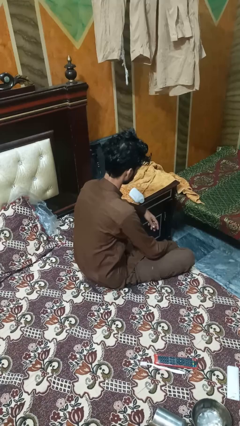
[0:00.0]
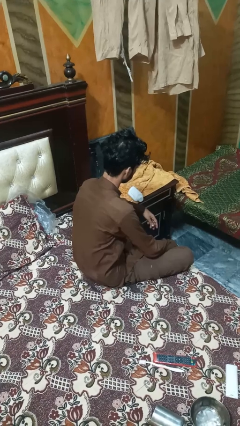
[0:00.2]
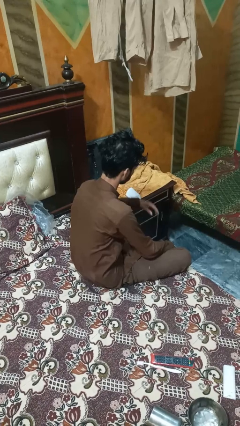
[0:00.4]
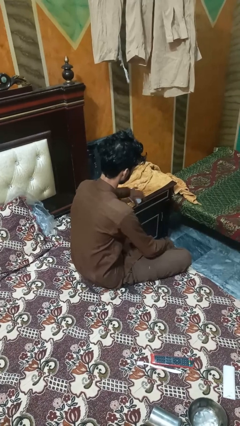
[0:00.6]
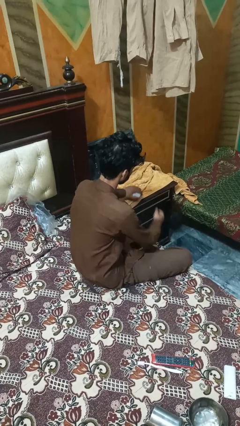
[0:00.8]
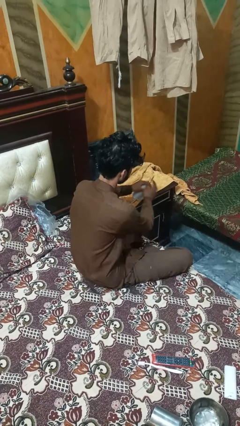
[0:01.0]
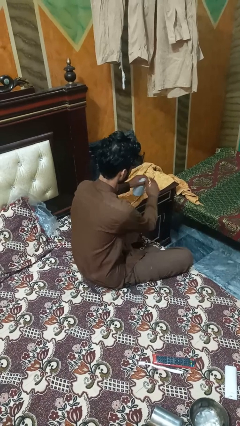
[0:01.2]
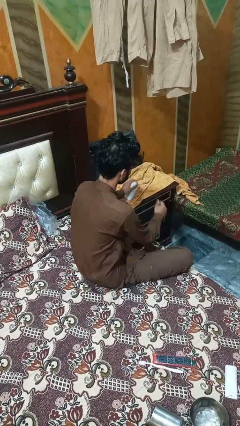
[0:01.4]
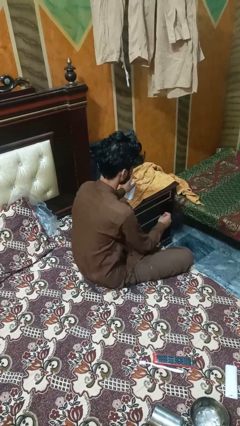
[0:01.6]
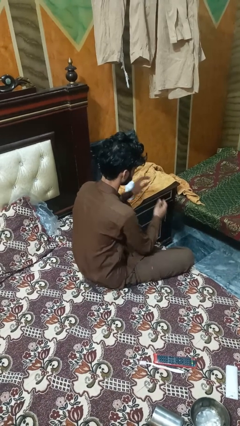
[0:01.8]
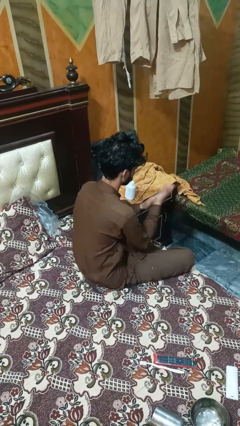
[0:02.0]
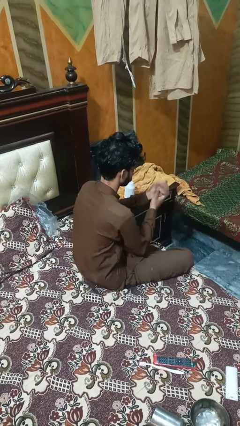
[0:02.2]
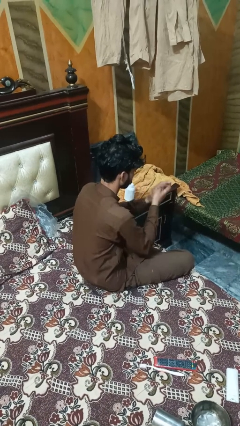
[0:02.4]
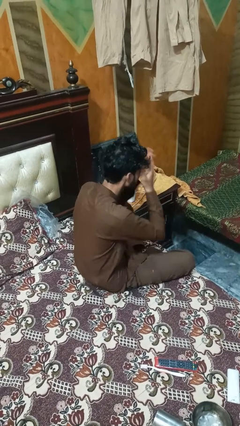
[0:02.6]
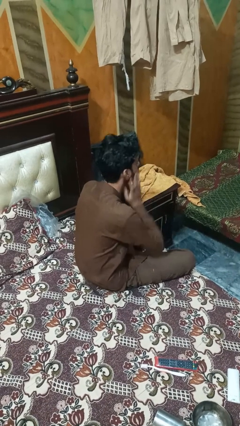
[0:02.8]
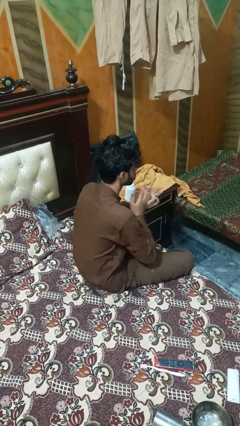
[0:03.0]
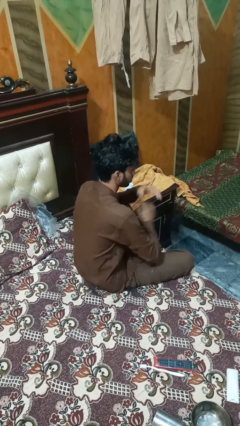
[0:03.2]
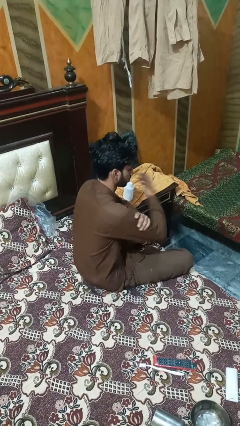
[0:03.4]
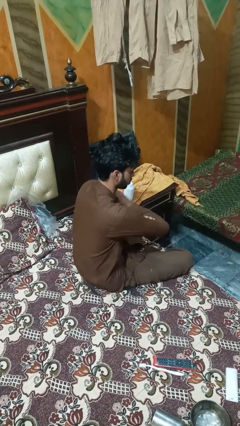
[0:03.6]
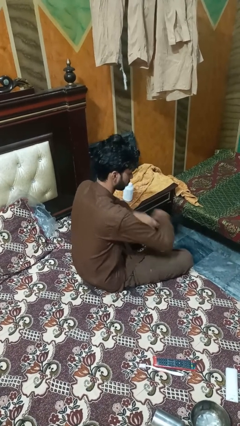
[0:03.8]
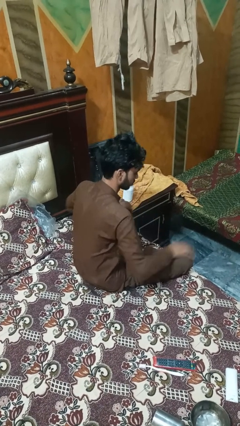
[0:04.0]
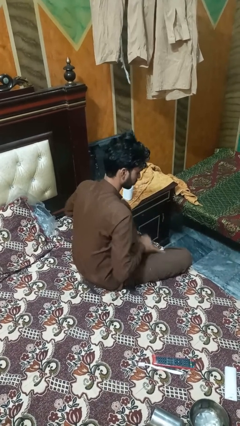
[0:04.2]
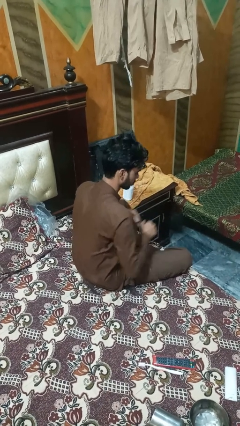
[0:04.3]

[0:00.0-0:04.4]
person applies sunscreen

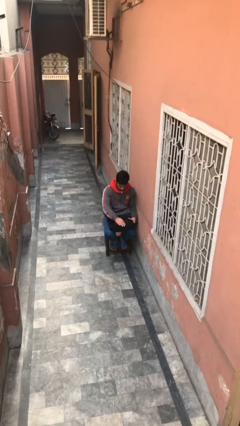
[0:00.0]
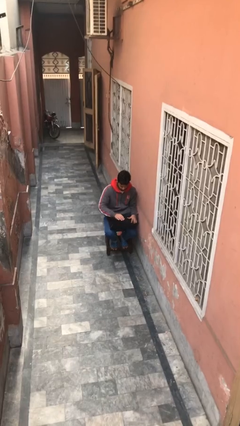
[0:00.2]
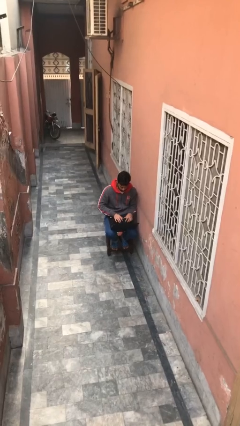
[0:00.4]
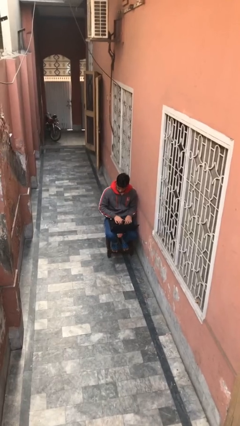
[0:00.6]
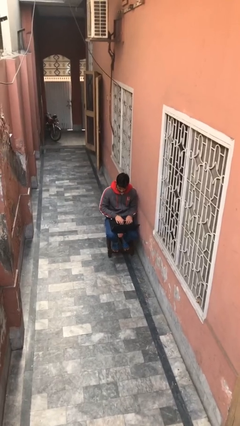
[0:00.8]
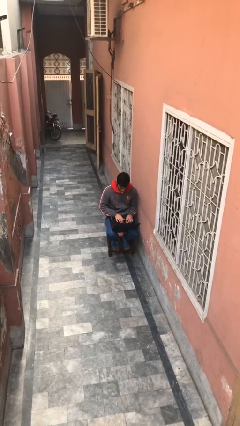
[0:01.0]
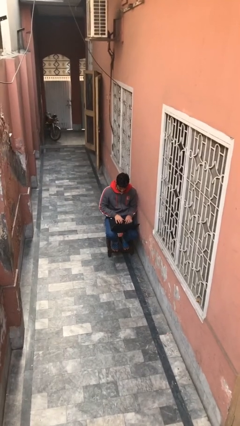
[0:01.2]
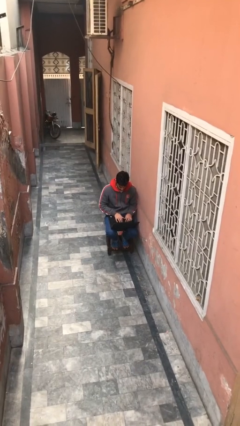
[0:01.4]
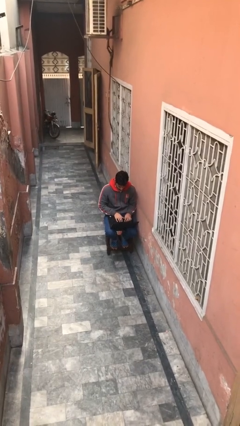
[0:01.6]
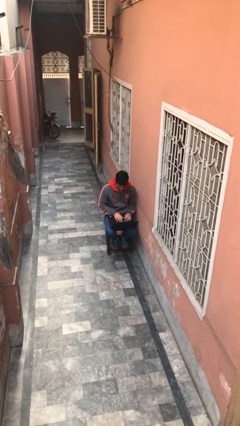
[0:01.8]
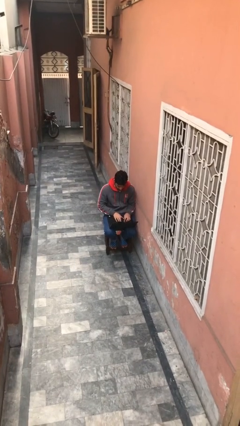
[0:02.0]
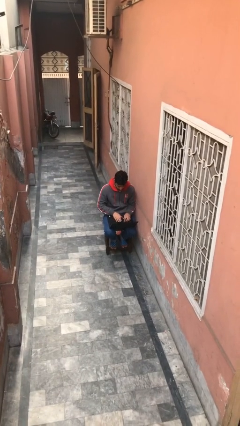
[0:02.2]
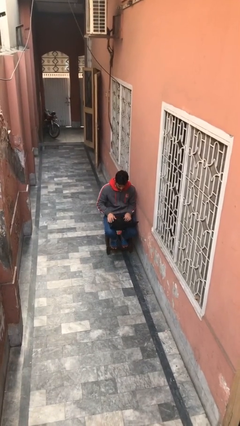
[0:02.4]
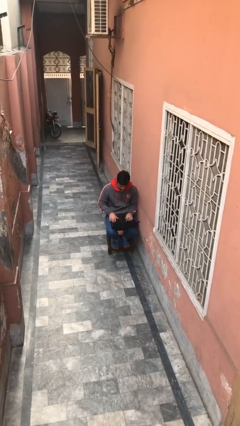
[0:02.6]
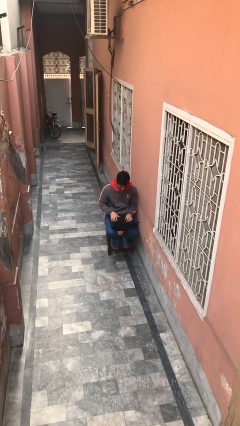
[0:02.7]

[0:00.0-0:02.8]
person interacts with laptop

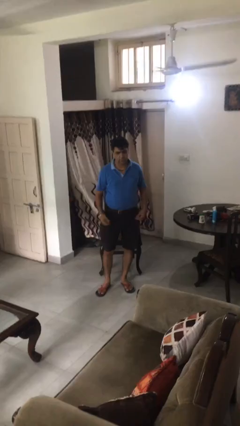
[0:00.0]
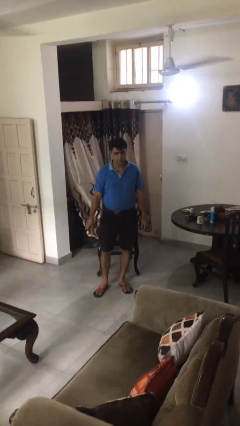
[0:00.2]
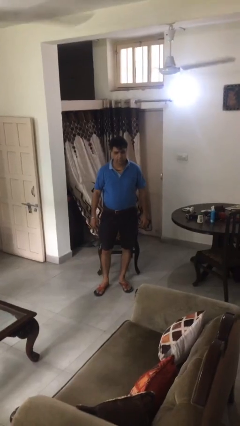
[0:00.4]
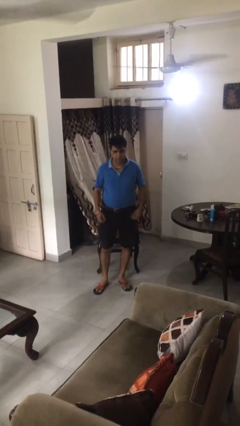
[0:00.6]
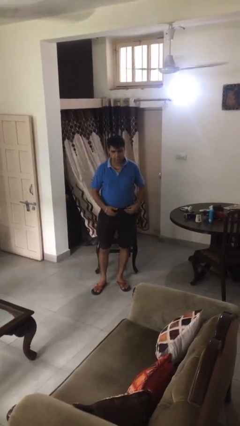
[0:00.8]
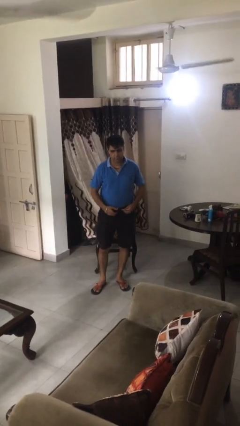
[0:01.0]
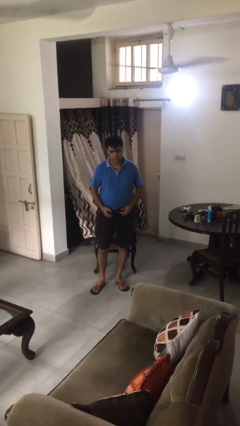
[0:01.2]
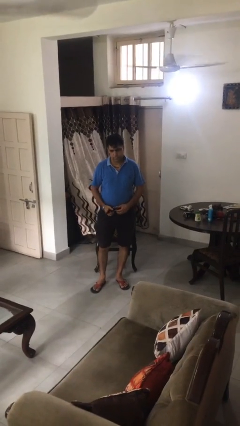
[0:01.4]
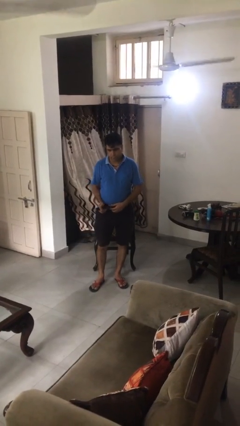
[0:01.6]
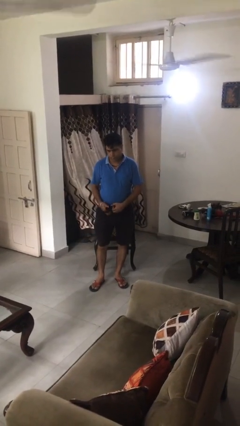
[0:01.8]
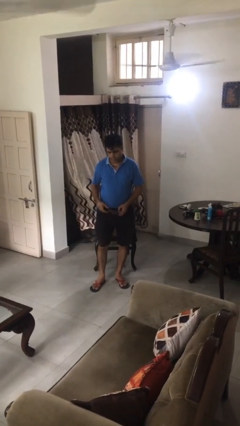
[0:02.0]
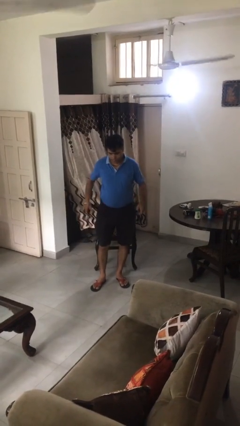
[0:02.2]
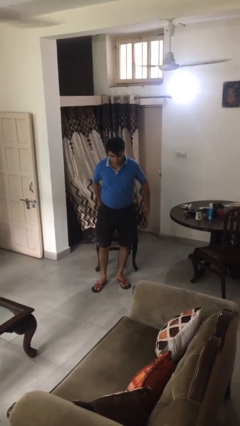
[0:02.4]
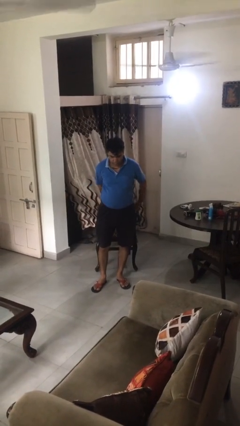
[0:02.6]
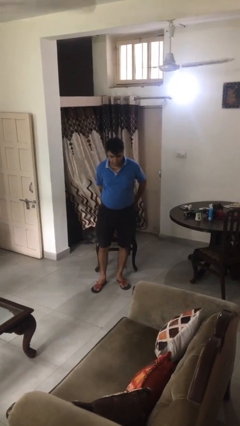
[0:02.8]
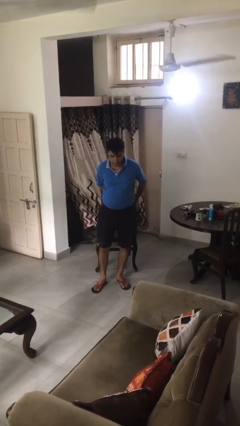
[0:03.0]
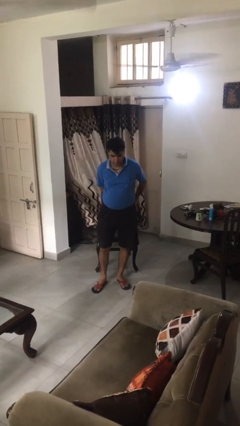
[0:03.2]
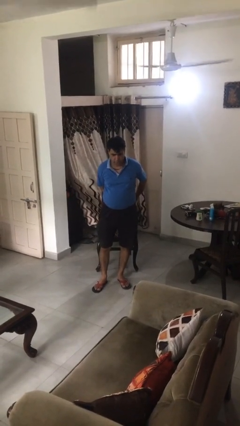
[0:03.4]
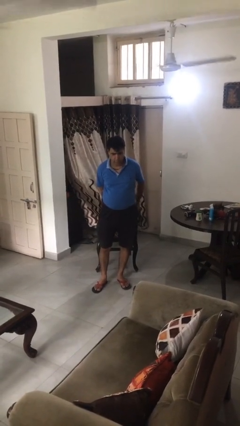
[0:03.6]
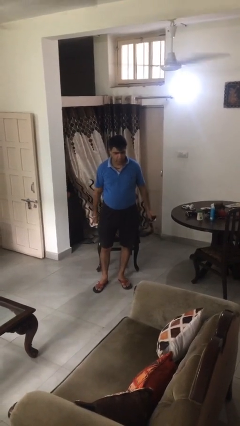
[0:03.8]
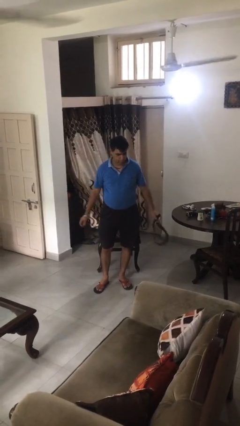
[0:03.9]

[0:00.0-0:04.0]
person takes off belt

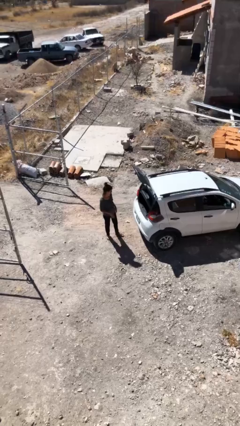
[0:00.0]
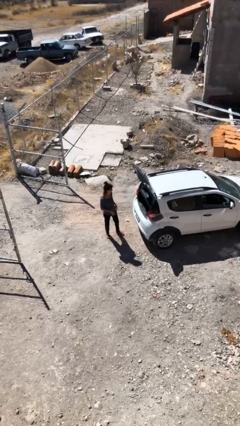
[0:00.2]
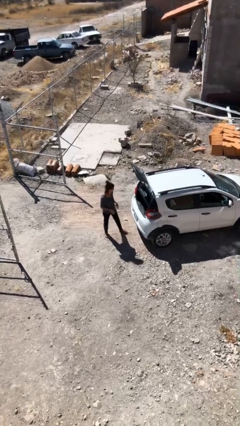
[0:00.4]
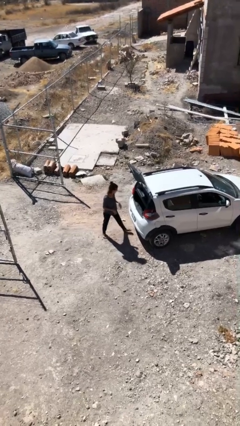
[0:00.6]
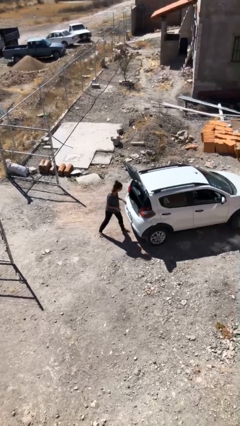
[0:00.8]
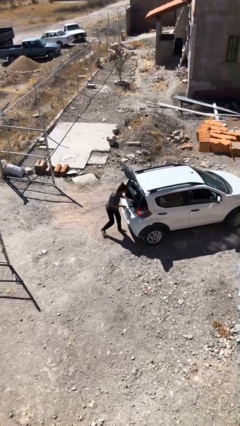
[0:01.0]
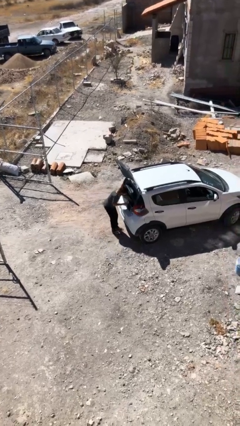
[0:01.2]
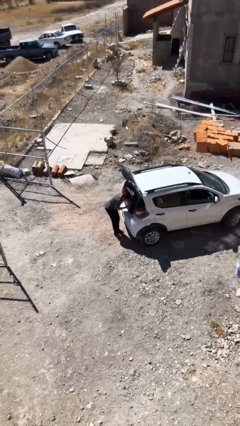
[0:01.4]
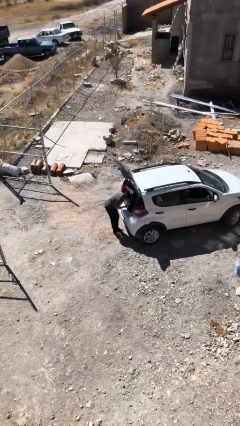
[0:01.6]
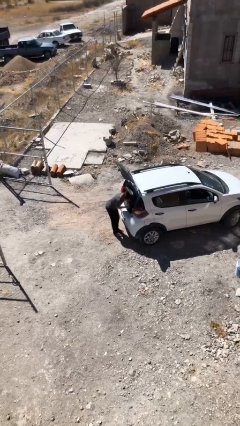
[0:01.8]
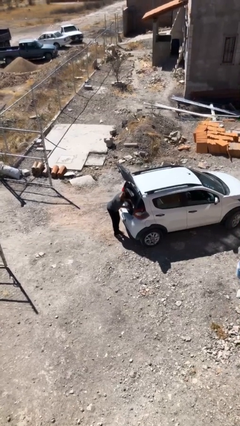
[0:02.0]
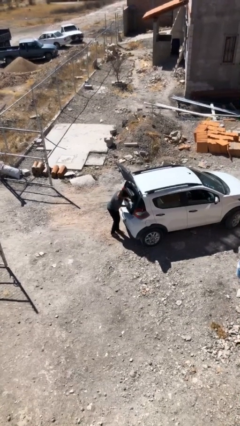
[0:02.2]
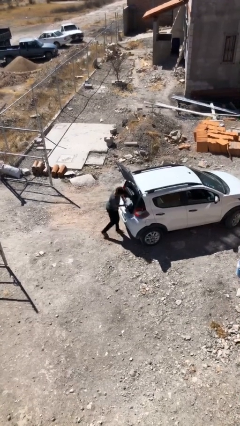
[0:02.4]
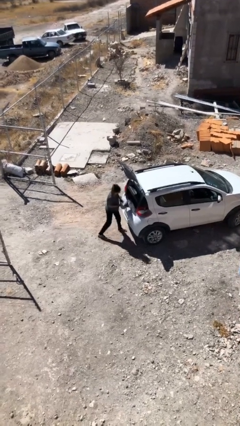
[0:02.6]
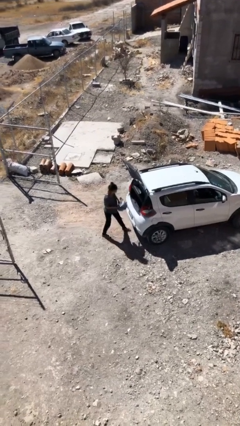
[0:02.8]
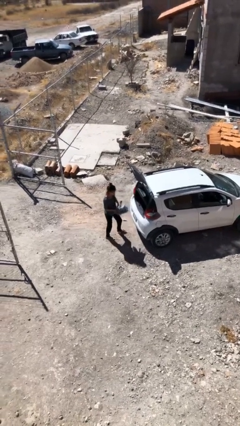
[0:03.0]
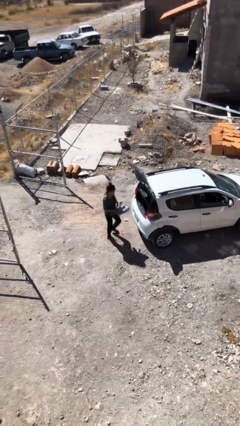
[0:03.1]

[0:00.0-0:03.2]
person unloads car

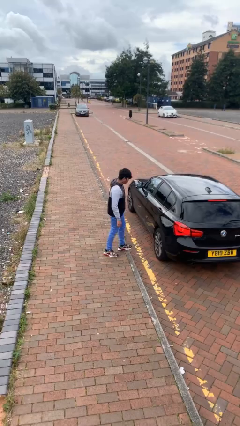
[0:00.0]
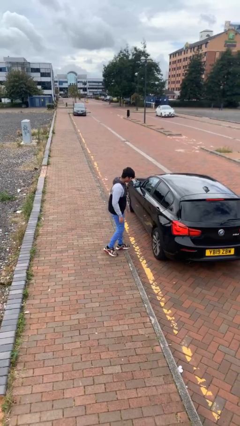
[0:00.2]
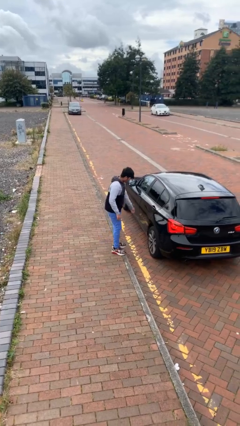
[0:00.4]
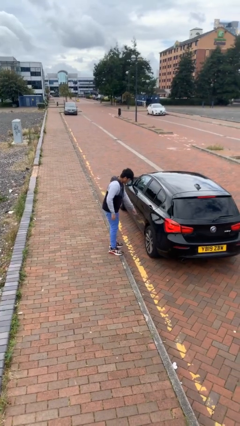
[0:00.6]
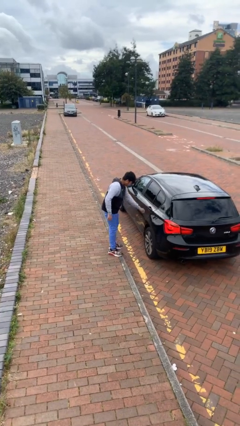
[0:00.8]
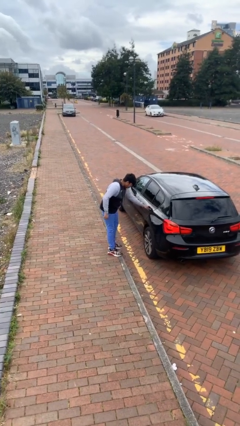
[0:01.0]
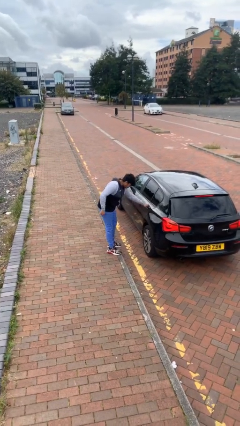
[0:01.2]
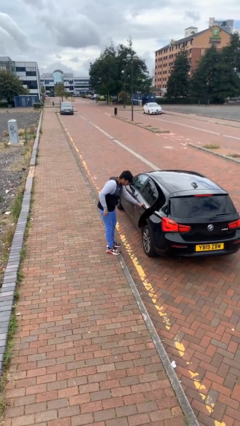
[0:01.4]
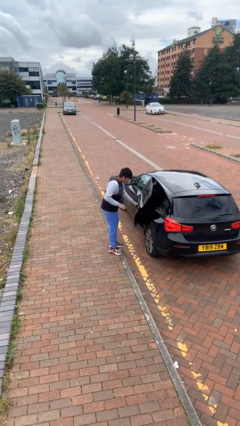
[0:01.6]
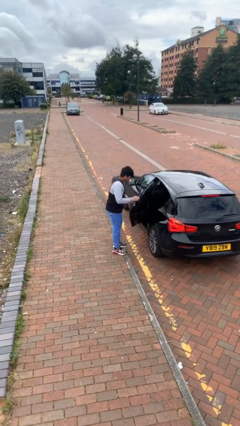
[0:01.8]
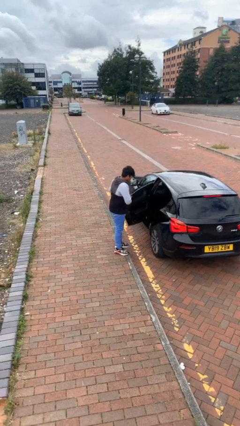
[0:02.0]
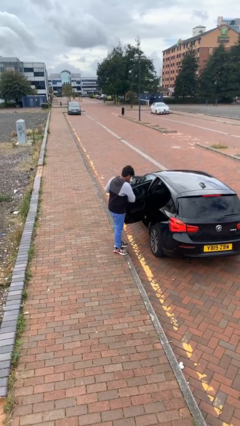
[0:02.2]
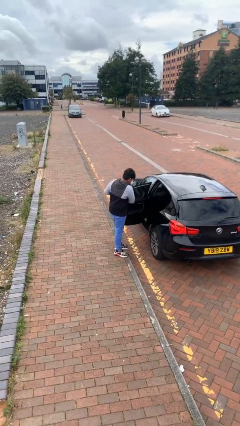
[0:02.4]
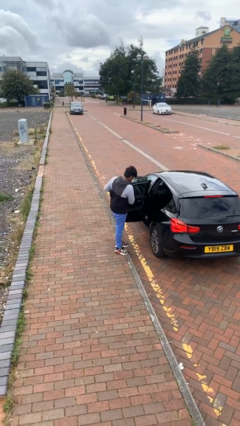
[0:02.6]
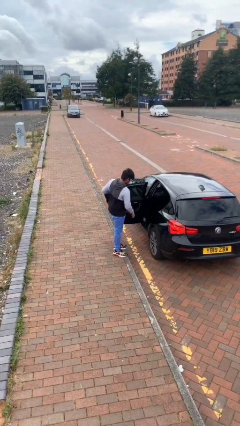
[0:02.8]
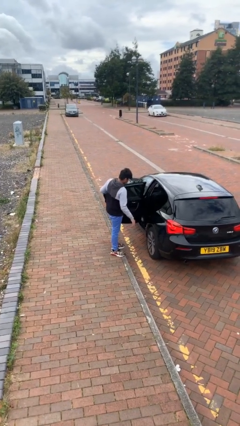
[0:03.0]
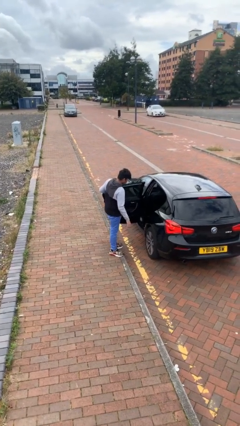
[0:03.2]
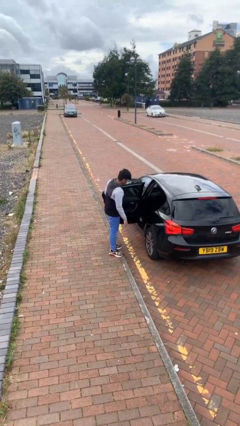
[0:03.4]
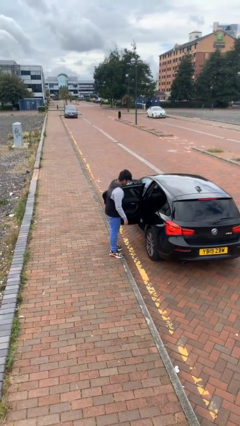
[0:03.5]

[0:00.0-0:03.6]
person opens car door
